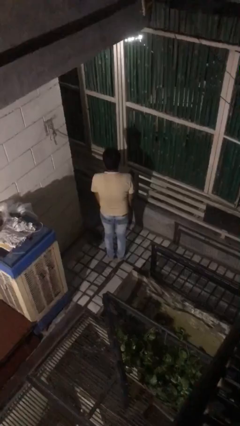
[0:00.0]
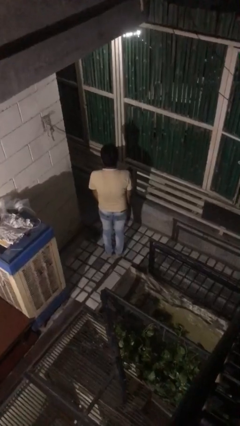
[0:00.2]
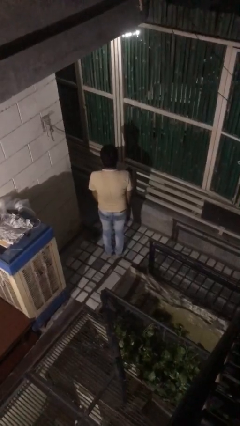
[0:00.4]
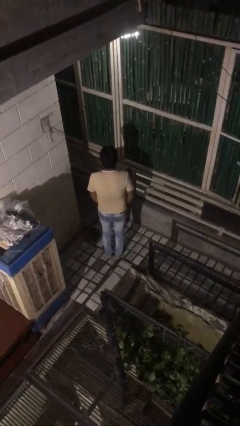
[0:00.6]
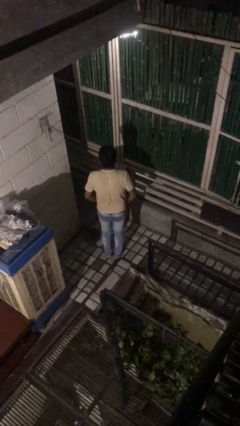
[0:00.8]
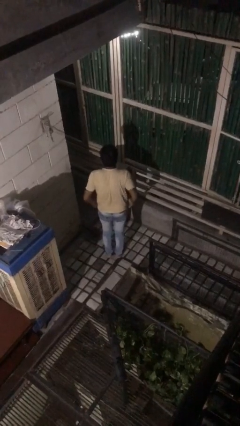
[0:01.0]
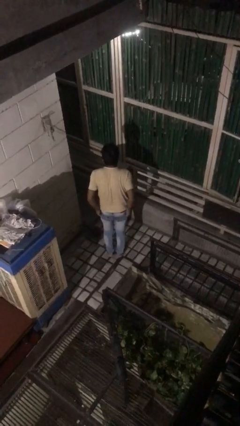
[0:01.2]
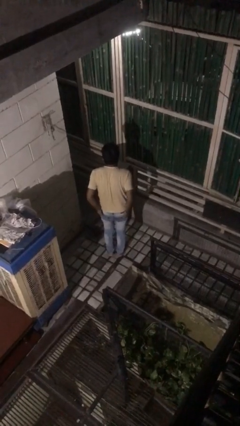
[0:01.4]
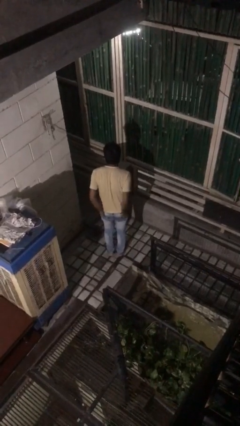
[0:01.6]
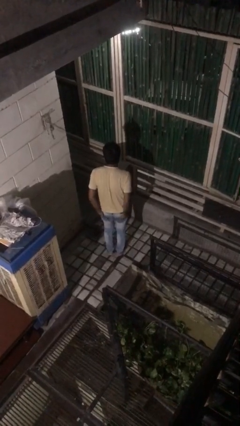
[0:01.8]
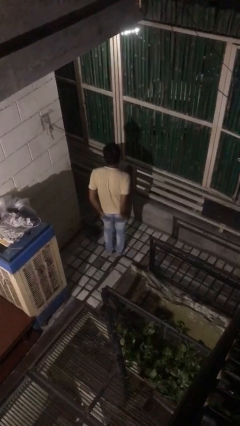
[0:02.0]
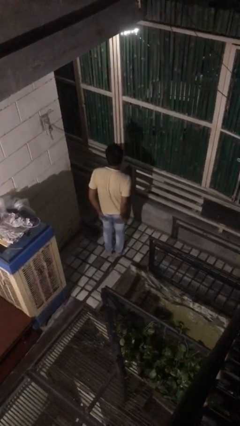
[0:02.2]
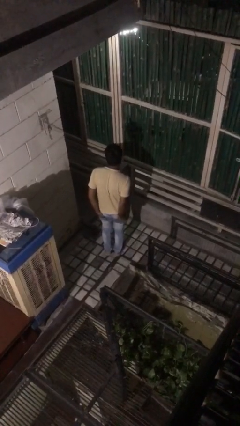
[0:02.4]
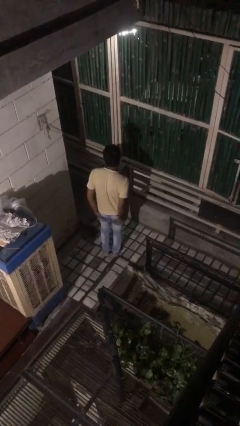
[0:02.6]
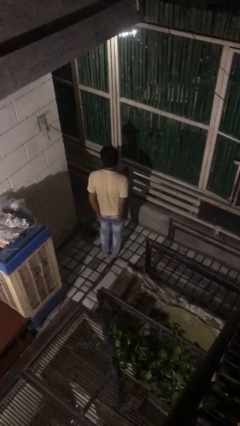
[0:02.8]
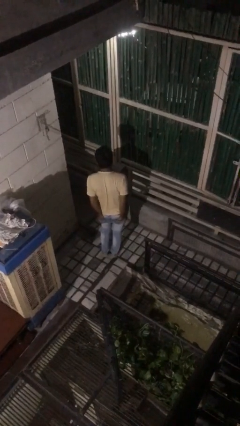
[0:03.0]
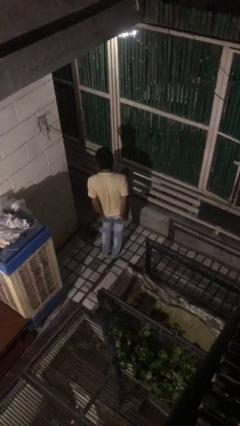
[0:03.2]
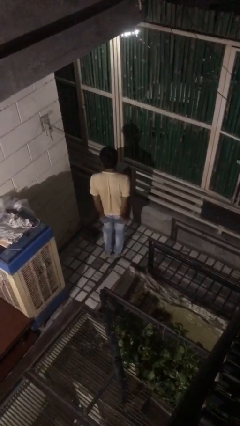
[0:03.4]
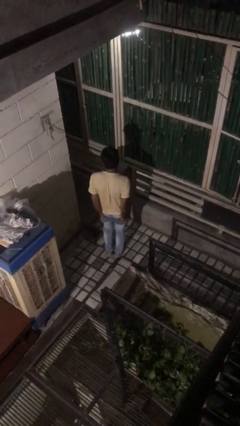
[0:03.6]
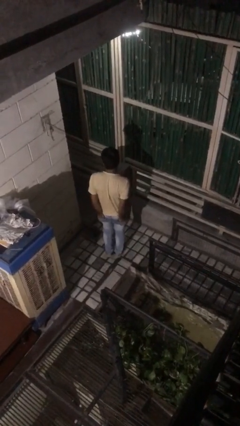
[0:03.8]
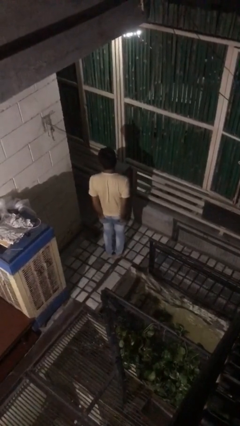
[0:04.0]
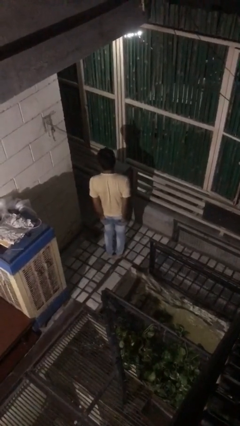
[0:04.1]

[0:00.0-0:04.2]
person puts hands in back pockets

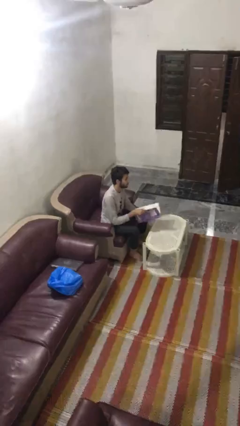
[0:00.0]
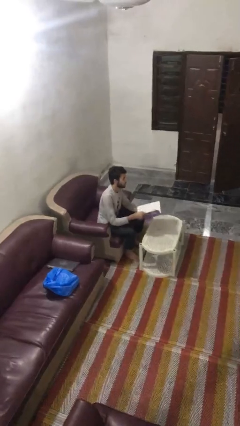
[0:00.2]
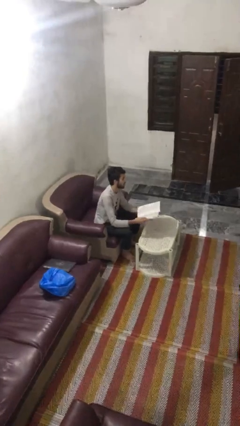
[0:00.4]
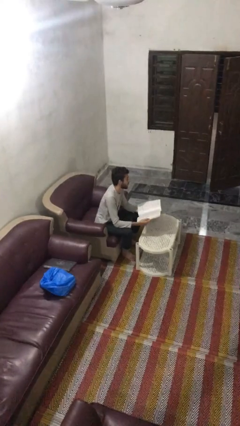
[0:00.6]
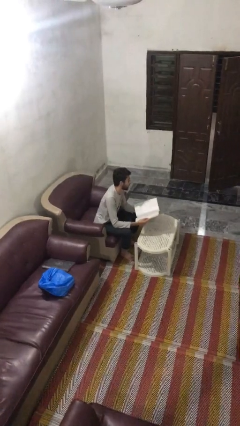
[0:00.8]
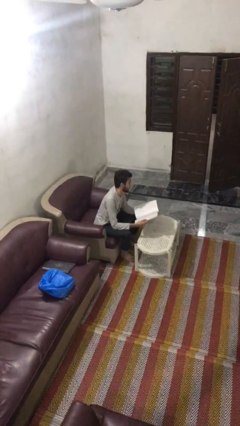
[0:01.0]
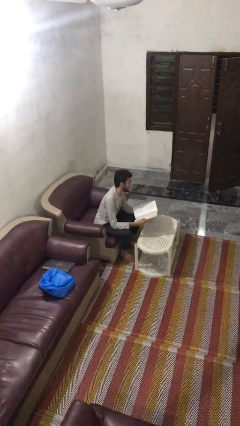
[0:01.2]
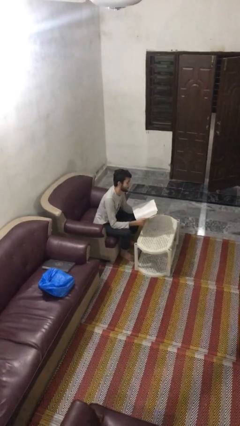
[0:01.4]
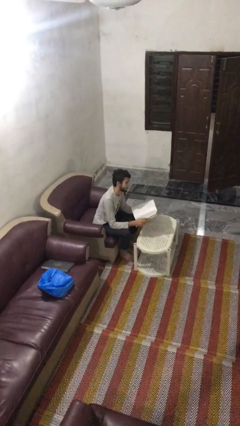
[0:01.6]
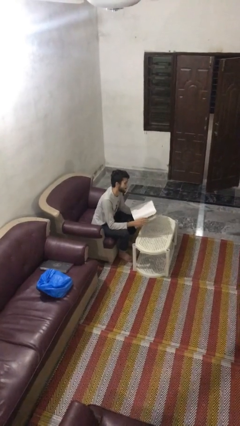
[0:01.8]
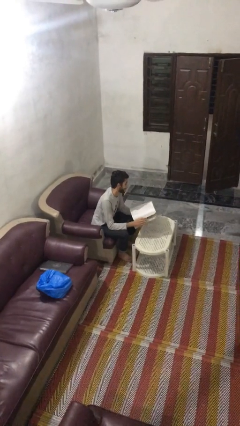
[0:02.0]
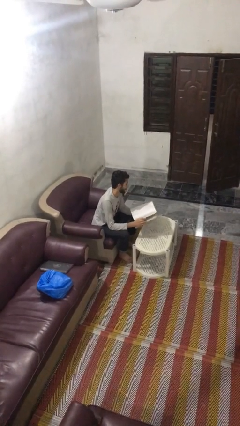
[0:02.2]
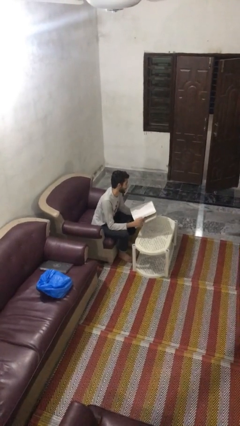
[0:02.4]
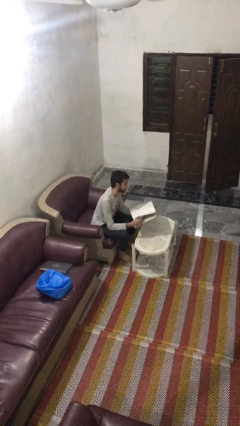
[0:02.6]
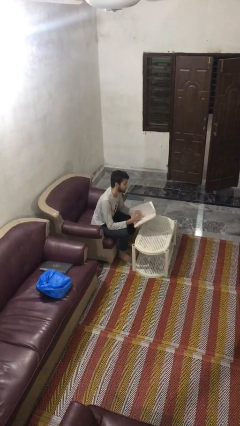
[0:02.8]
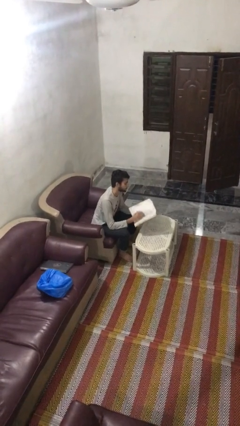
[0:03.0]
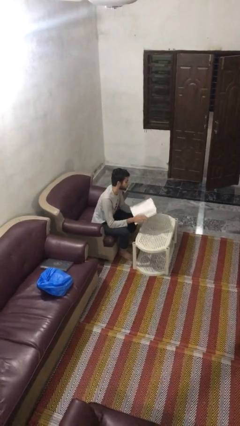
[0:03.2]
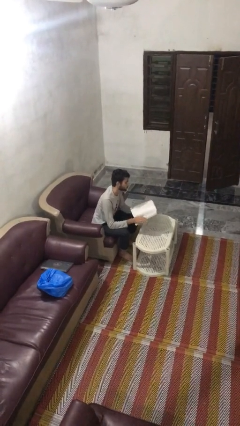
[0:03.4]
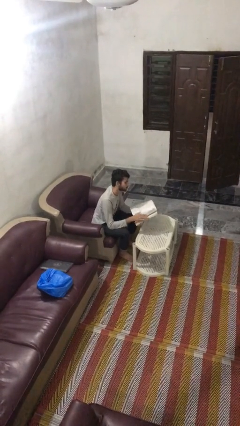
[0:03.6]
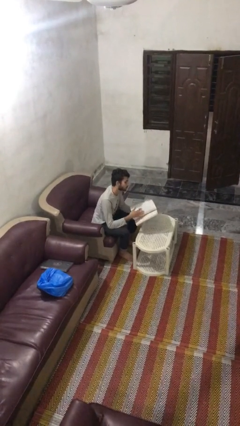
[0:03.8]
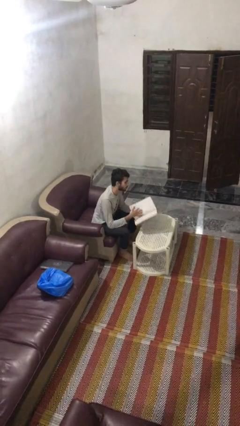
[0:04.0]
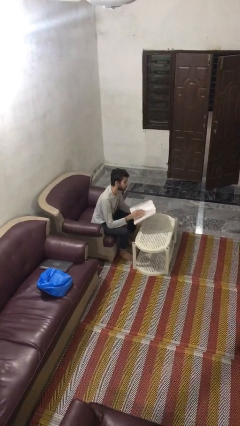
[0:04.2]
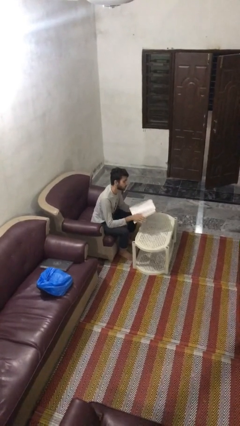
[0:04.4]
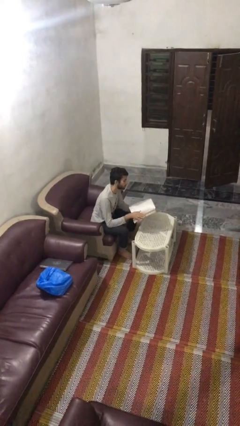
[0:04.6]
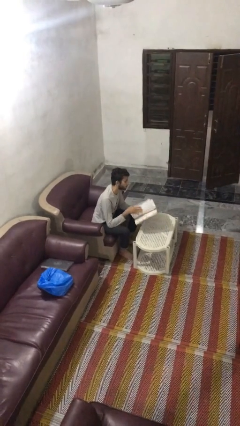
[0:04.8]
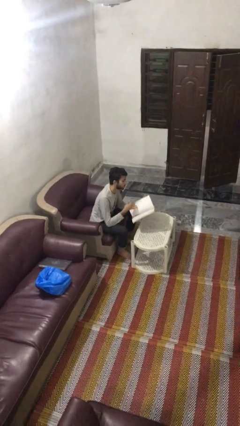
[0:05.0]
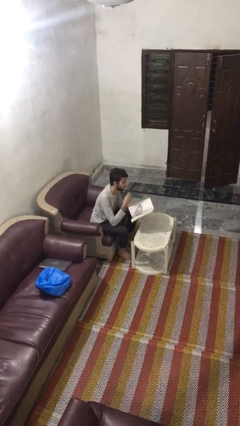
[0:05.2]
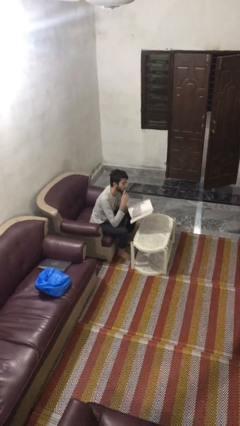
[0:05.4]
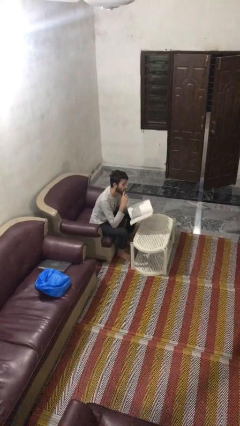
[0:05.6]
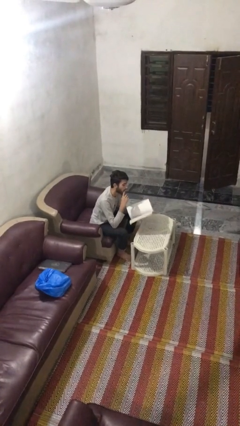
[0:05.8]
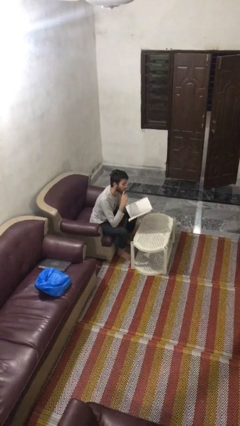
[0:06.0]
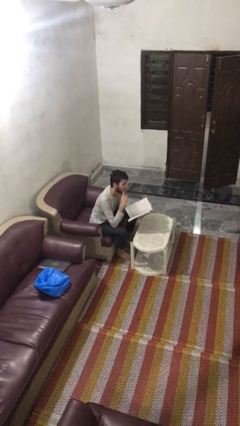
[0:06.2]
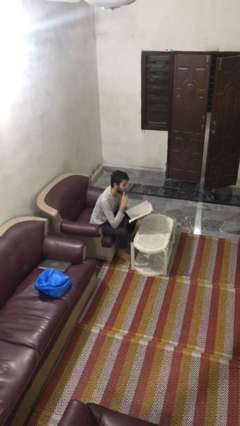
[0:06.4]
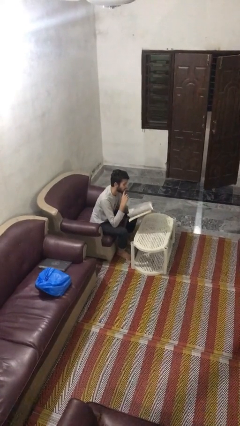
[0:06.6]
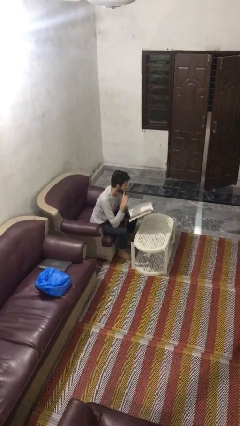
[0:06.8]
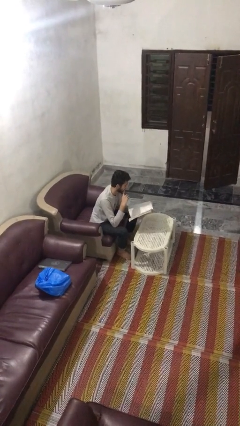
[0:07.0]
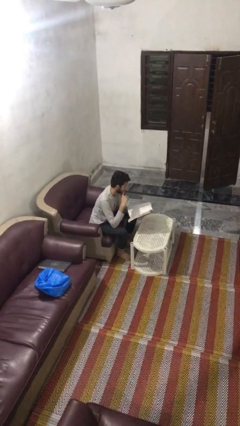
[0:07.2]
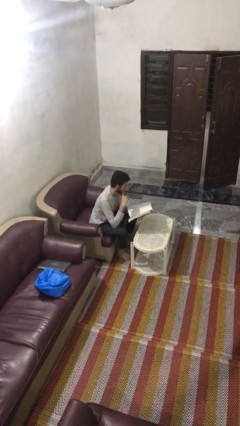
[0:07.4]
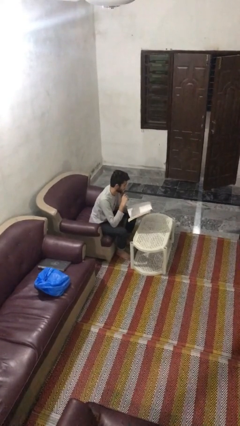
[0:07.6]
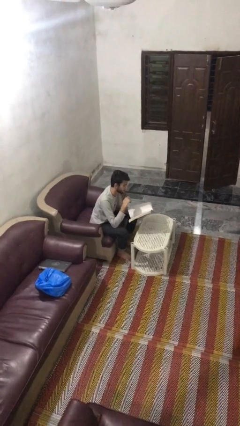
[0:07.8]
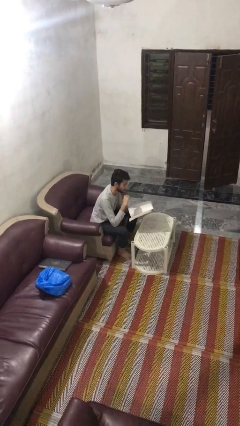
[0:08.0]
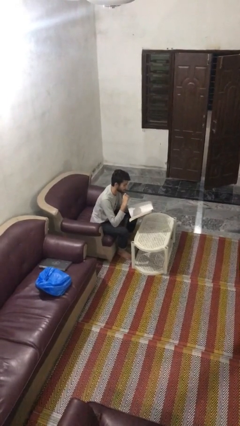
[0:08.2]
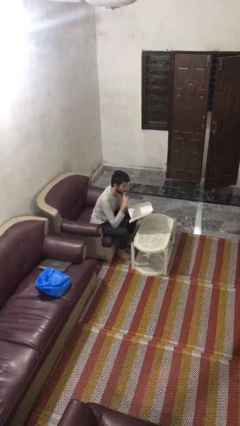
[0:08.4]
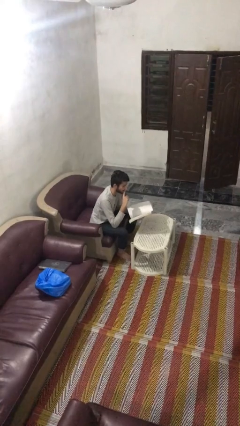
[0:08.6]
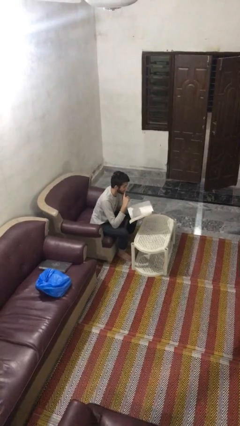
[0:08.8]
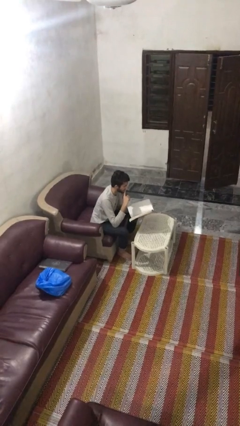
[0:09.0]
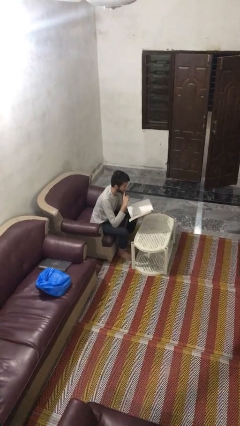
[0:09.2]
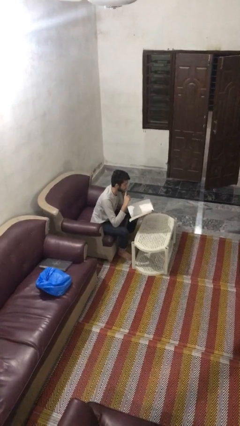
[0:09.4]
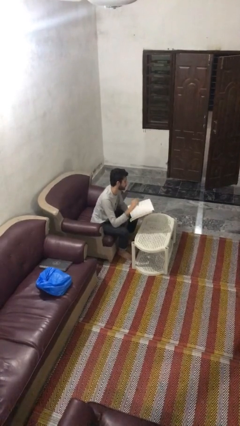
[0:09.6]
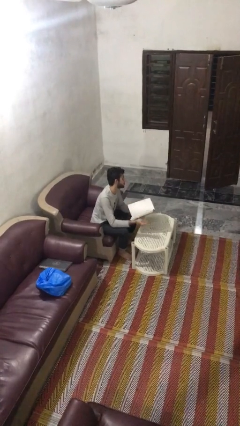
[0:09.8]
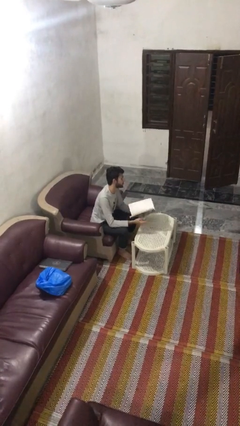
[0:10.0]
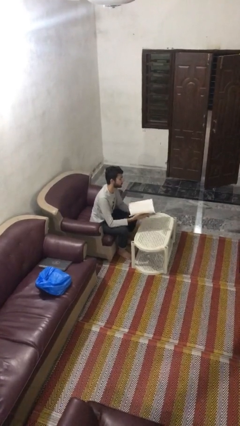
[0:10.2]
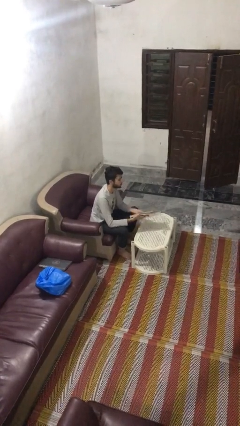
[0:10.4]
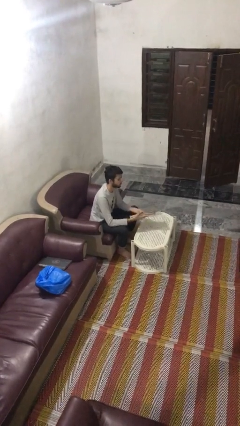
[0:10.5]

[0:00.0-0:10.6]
person reads document

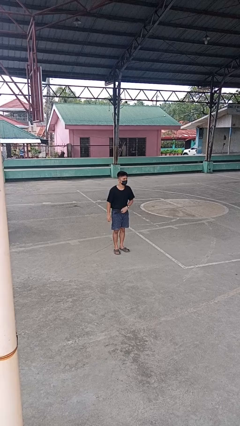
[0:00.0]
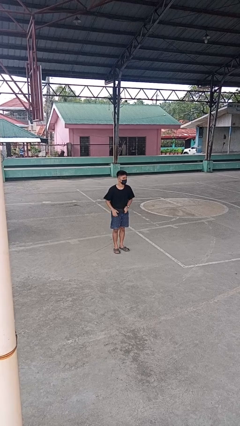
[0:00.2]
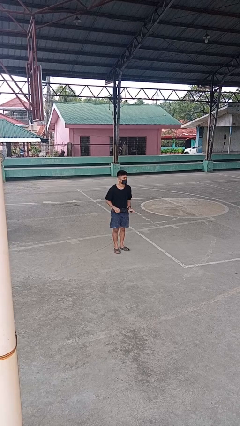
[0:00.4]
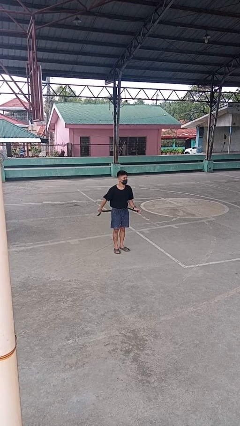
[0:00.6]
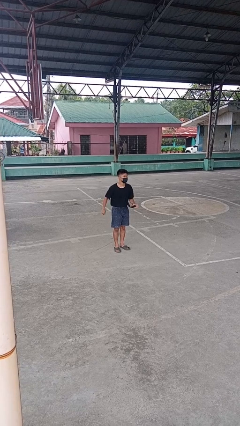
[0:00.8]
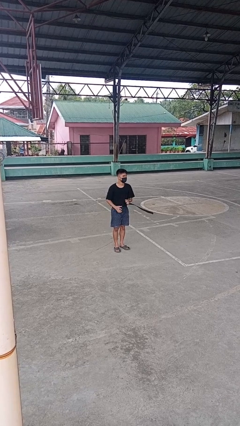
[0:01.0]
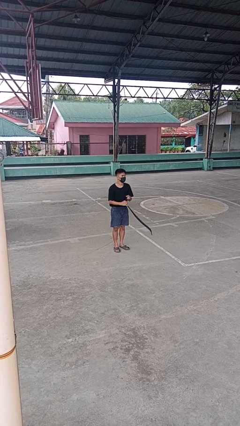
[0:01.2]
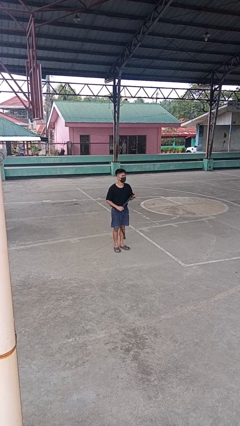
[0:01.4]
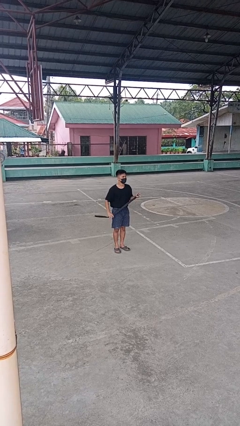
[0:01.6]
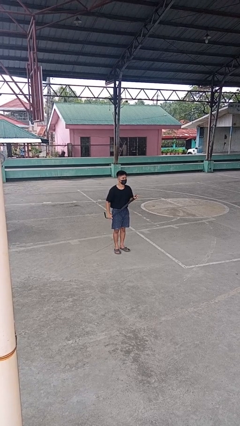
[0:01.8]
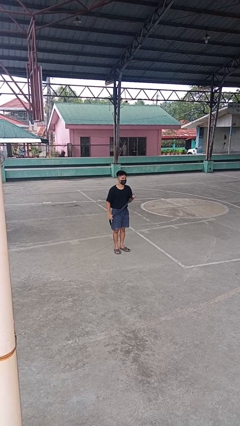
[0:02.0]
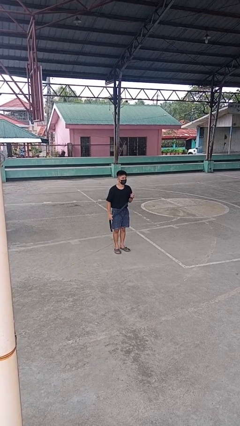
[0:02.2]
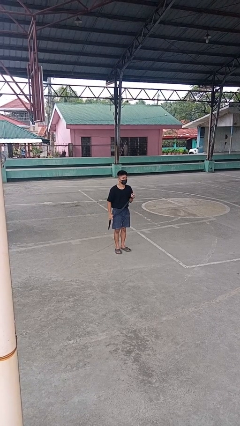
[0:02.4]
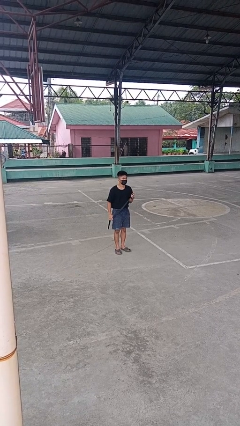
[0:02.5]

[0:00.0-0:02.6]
person takes off belt

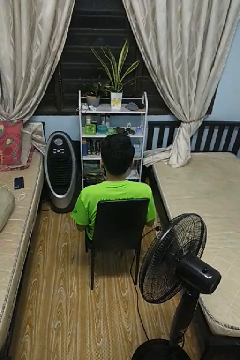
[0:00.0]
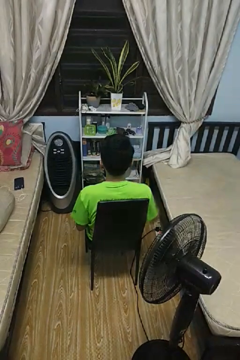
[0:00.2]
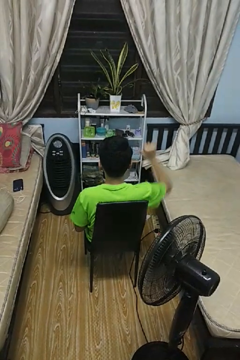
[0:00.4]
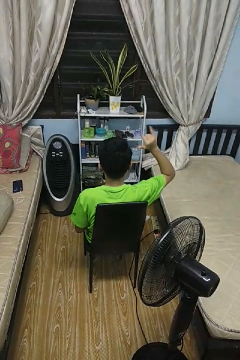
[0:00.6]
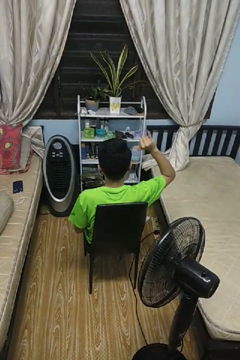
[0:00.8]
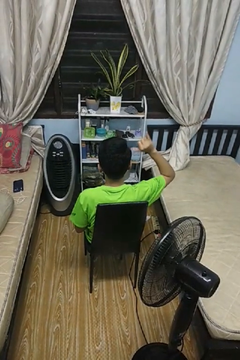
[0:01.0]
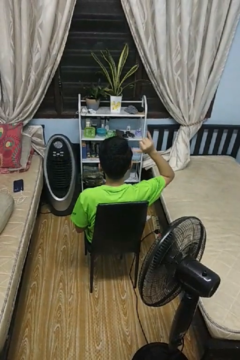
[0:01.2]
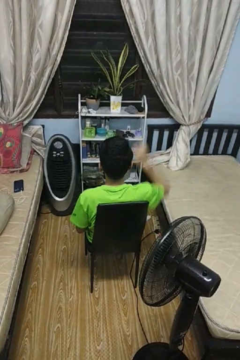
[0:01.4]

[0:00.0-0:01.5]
person gestures hang loose
